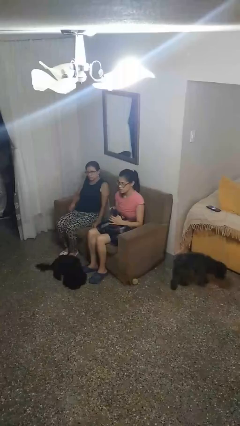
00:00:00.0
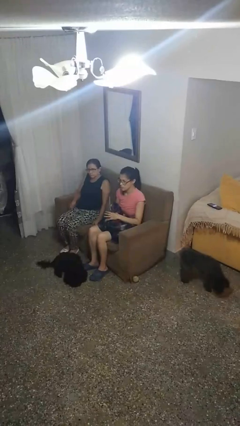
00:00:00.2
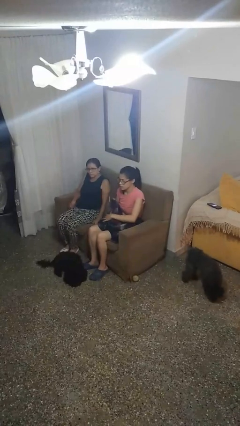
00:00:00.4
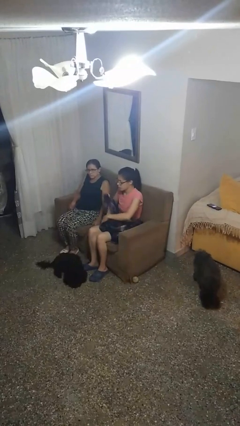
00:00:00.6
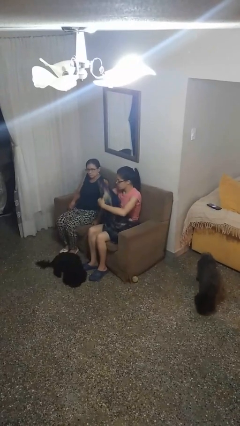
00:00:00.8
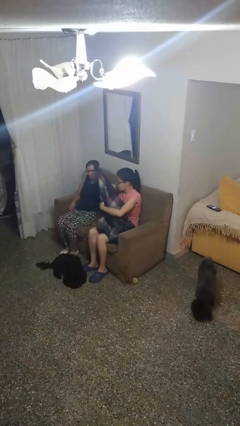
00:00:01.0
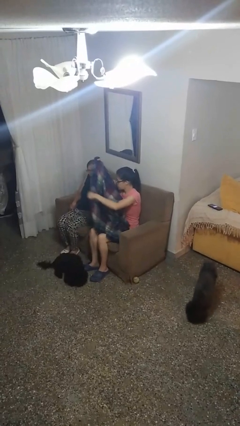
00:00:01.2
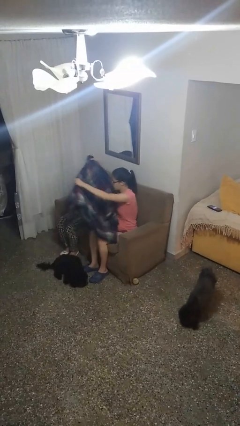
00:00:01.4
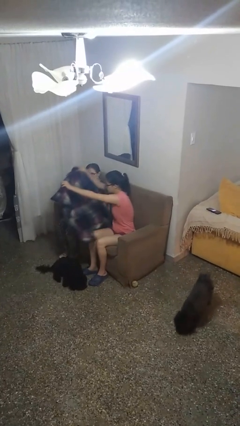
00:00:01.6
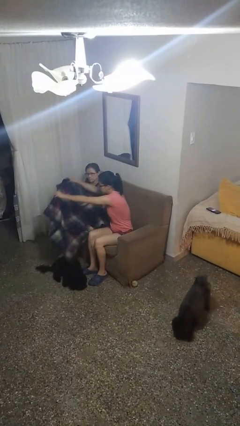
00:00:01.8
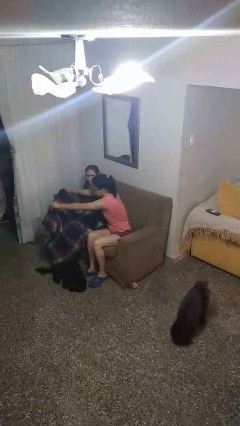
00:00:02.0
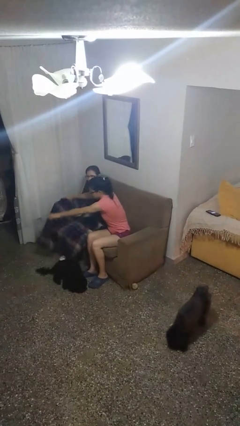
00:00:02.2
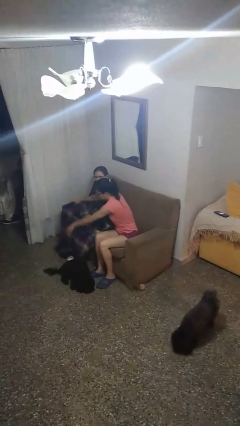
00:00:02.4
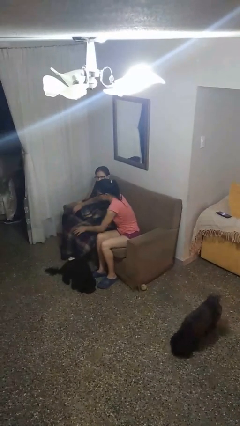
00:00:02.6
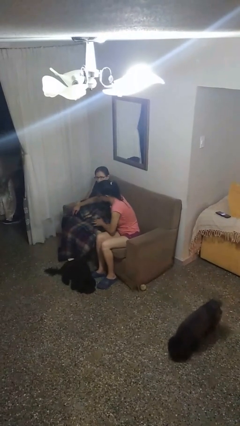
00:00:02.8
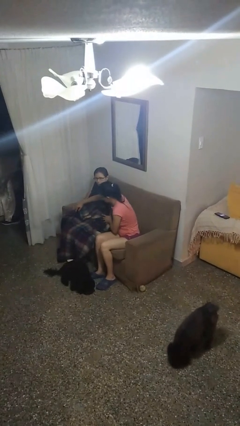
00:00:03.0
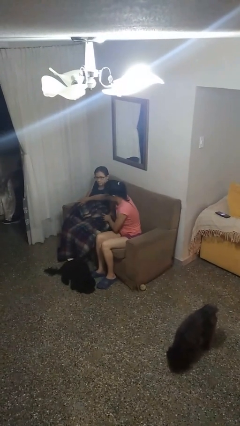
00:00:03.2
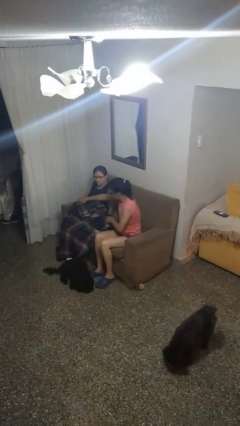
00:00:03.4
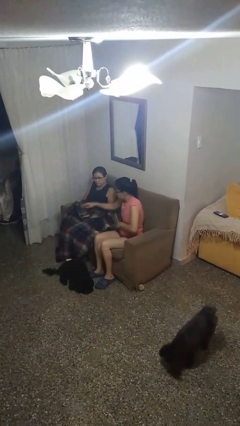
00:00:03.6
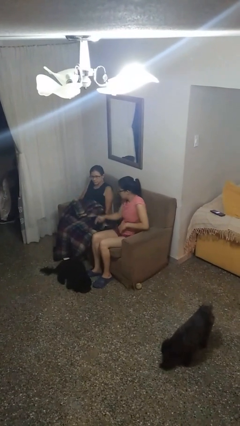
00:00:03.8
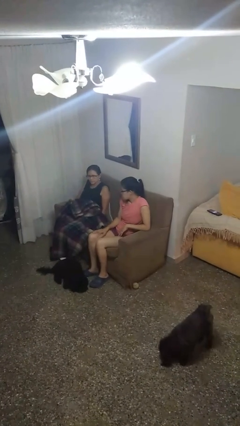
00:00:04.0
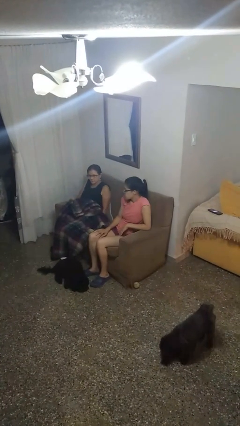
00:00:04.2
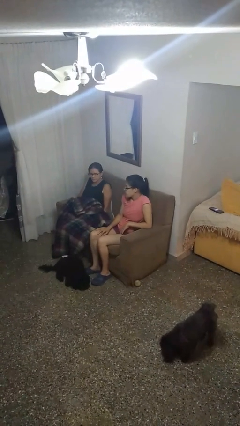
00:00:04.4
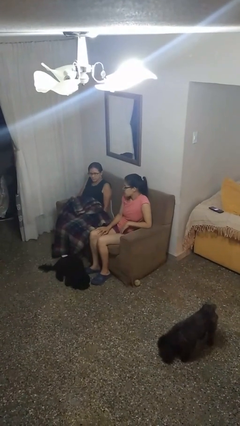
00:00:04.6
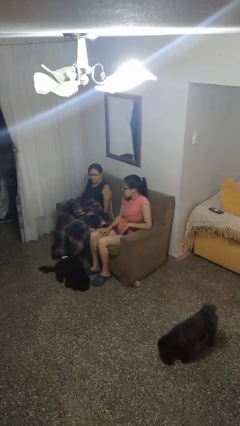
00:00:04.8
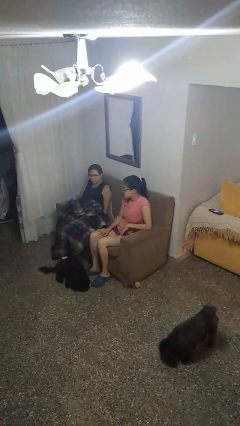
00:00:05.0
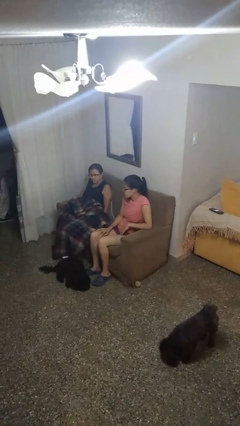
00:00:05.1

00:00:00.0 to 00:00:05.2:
person covers friend with blanket

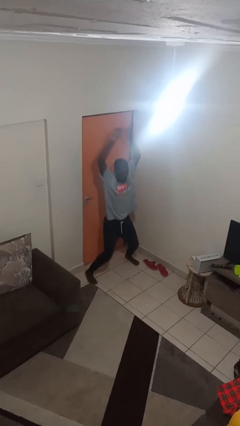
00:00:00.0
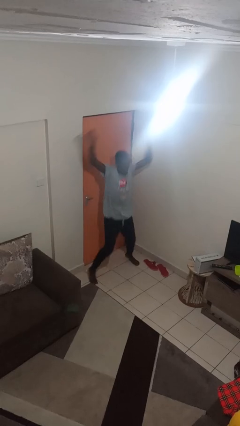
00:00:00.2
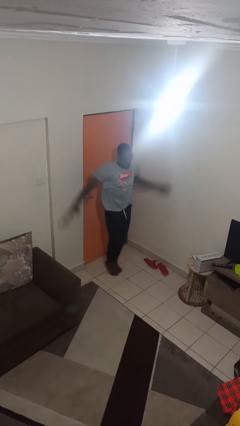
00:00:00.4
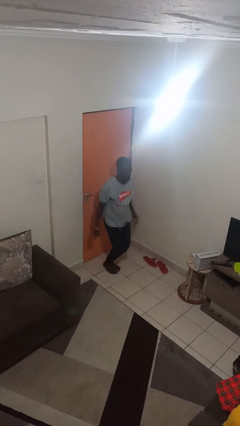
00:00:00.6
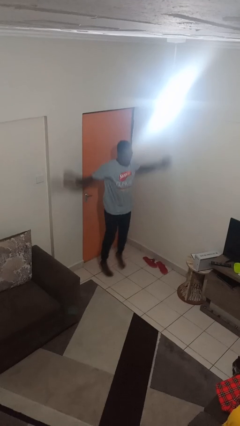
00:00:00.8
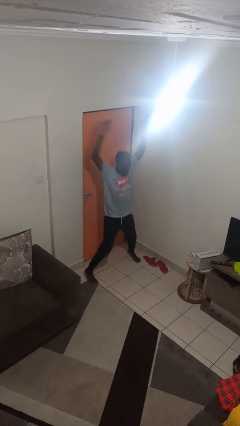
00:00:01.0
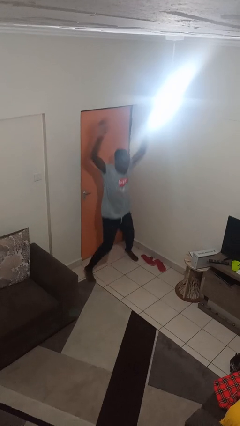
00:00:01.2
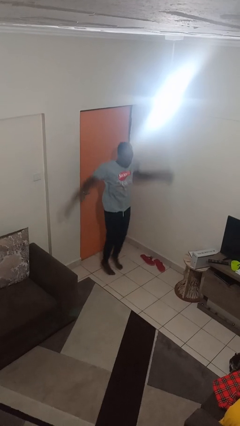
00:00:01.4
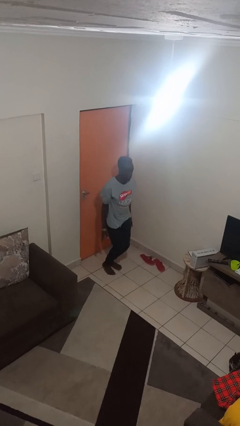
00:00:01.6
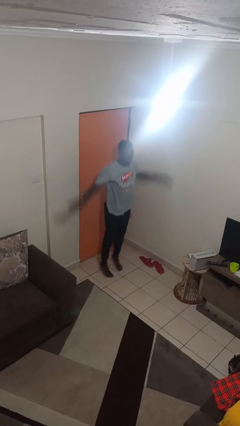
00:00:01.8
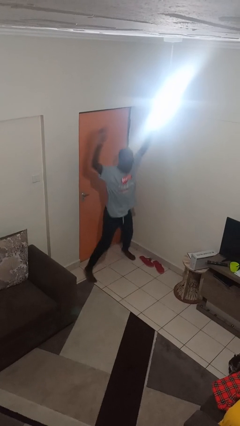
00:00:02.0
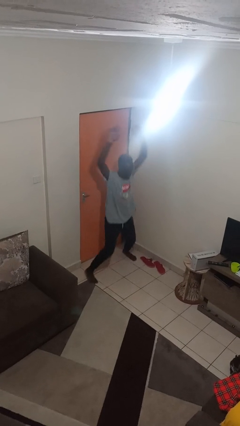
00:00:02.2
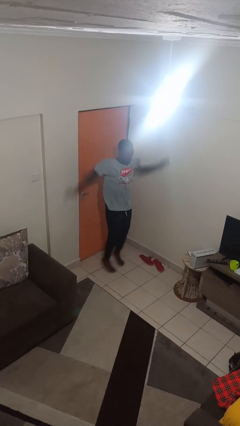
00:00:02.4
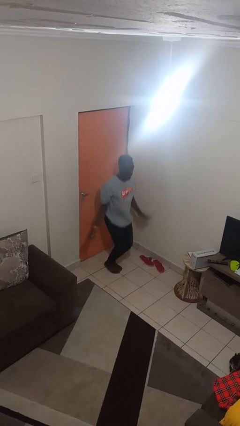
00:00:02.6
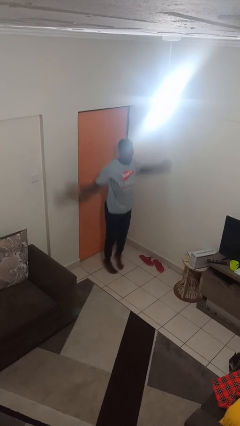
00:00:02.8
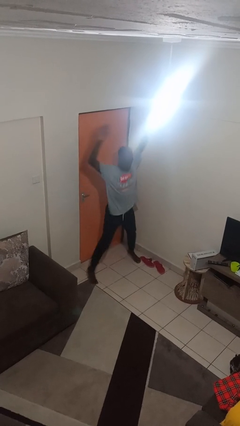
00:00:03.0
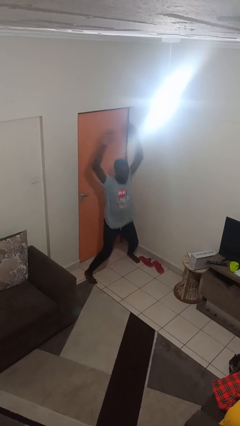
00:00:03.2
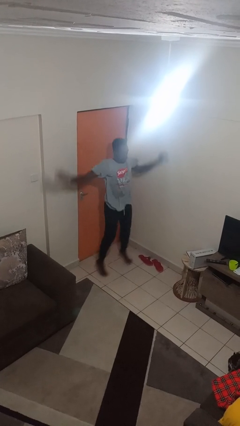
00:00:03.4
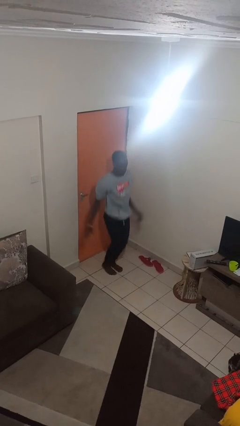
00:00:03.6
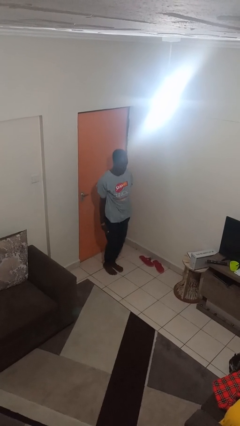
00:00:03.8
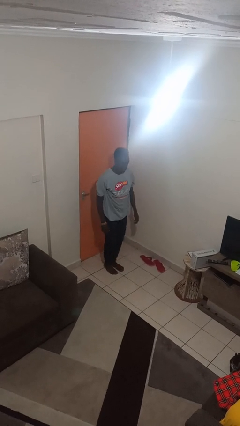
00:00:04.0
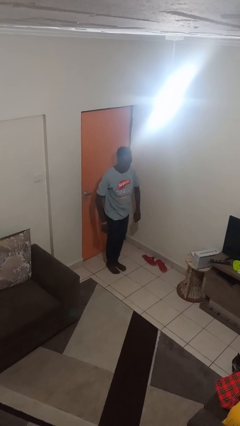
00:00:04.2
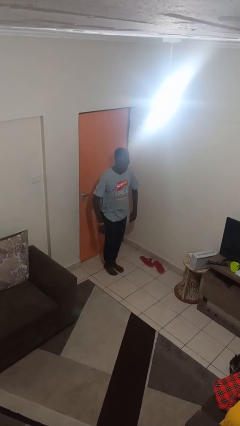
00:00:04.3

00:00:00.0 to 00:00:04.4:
person exercises with jumping jacks

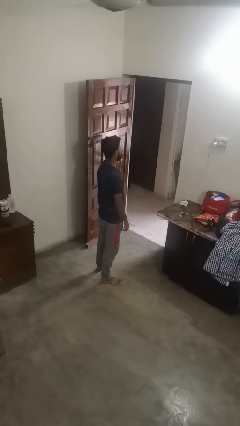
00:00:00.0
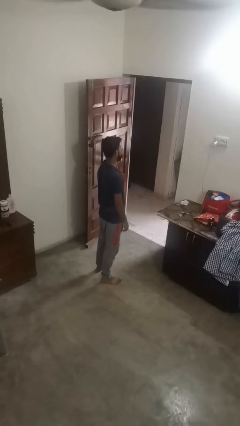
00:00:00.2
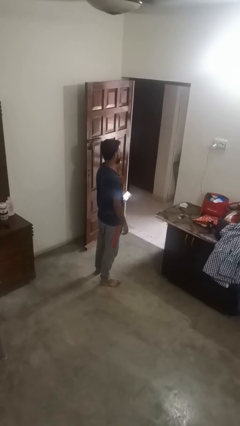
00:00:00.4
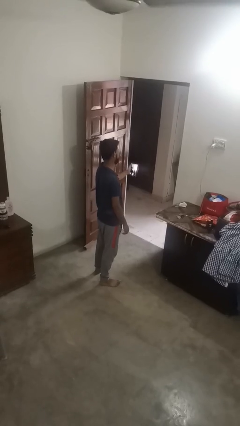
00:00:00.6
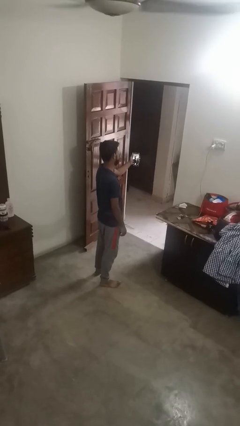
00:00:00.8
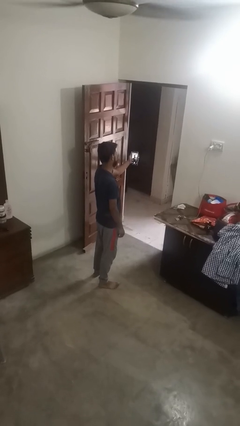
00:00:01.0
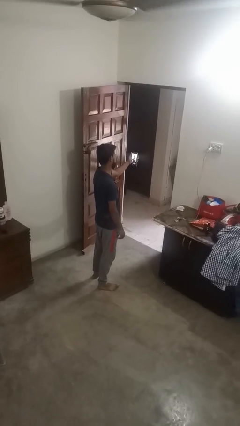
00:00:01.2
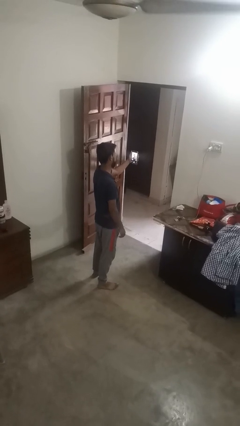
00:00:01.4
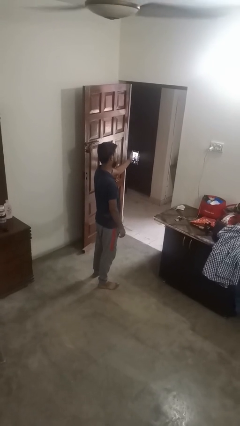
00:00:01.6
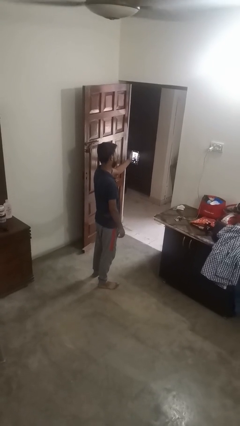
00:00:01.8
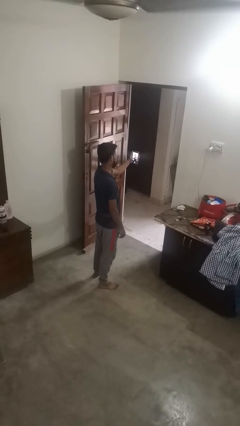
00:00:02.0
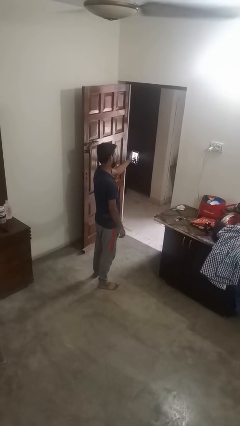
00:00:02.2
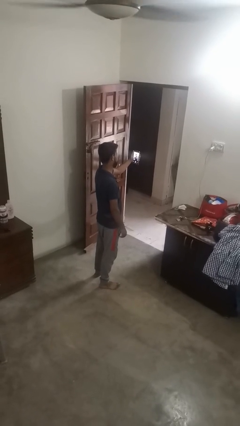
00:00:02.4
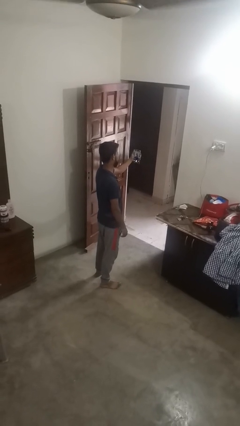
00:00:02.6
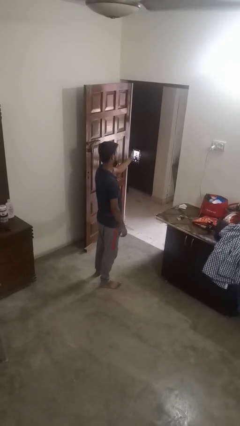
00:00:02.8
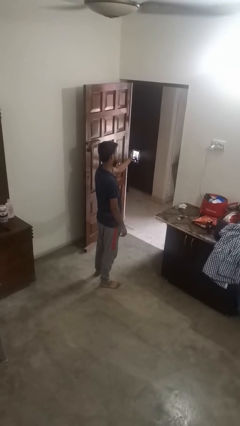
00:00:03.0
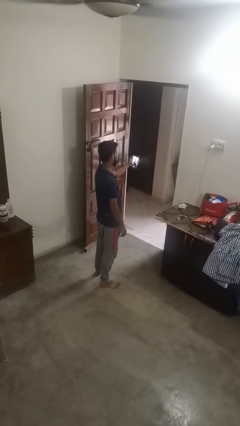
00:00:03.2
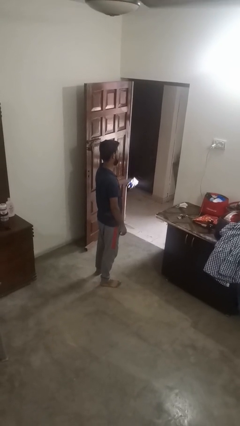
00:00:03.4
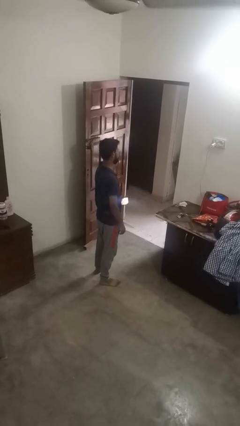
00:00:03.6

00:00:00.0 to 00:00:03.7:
person takes selfie

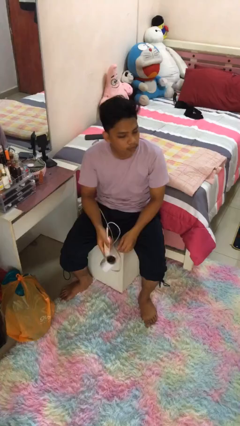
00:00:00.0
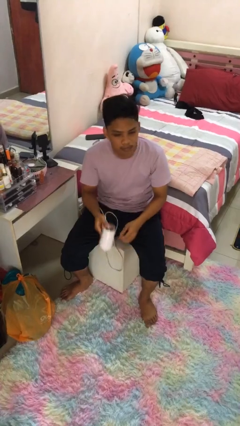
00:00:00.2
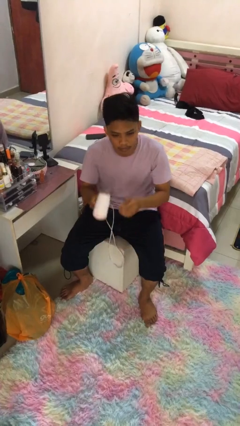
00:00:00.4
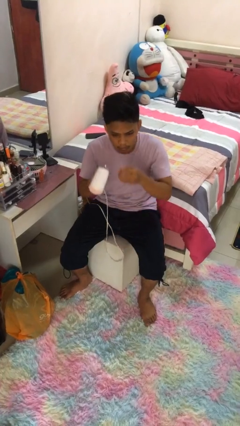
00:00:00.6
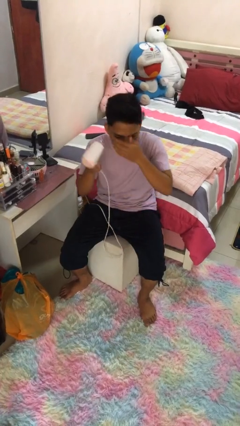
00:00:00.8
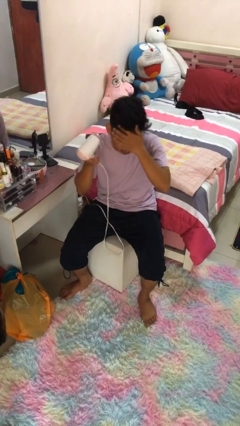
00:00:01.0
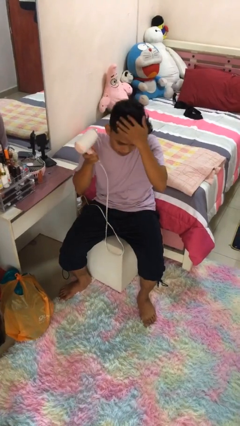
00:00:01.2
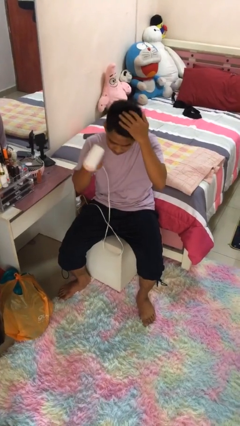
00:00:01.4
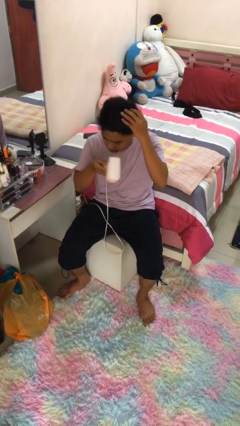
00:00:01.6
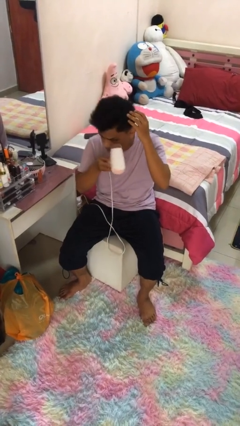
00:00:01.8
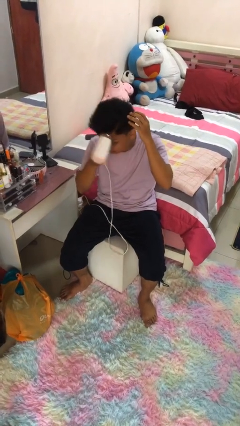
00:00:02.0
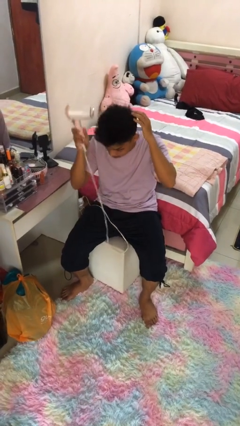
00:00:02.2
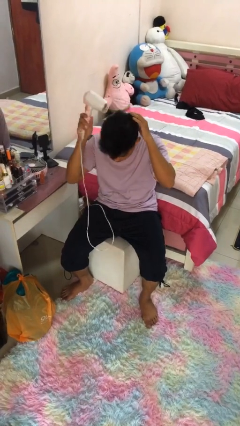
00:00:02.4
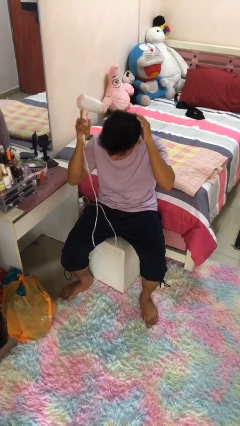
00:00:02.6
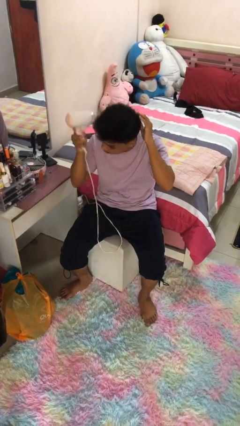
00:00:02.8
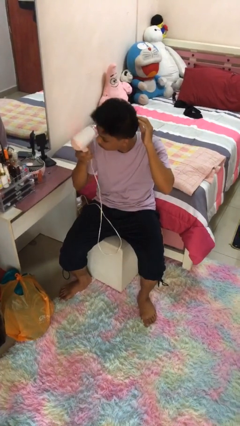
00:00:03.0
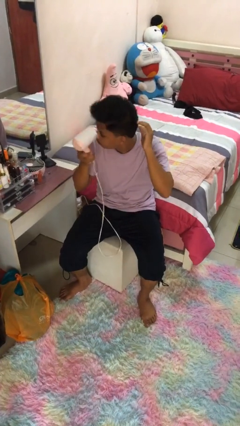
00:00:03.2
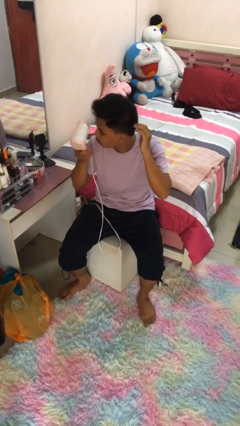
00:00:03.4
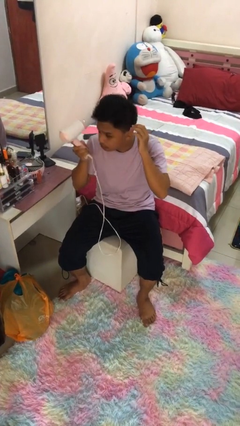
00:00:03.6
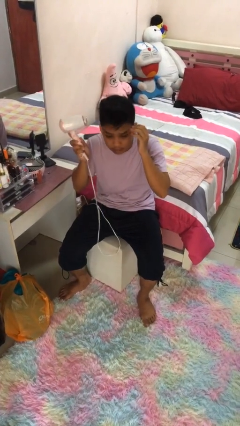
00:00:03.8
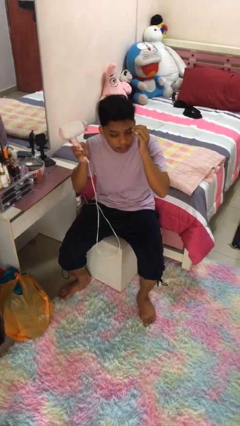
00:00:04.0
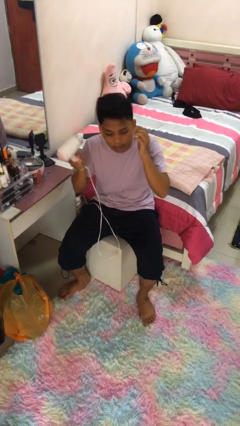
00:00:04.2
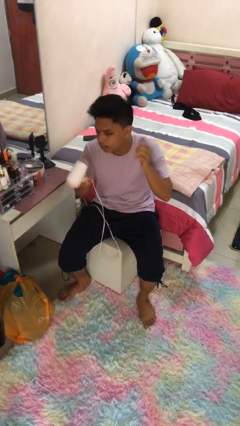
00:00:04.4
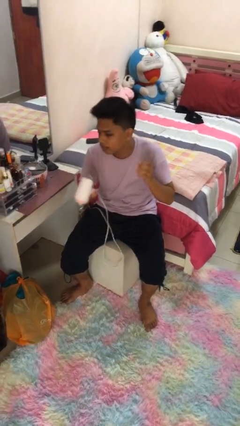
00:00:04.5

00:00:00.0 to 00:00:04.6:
person dries hair with hairdryer
